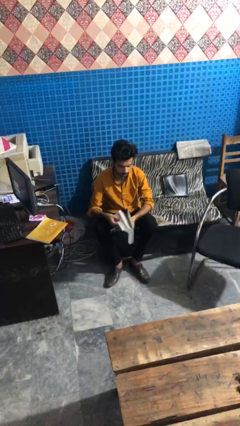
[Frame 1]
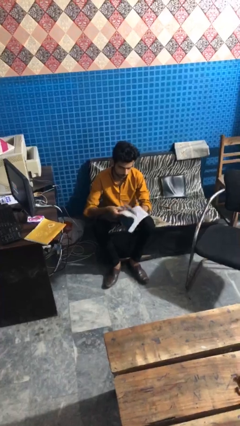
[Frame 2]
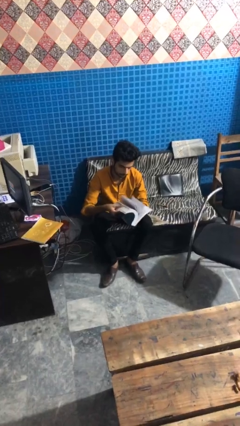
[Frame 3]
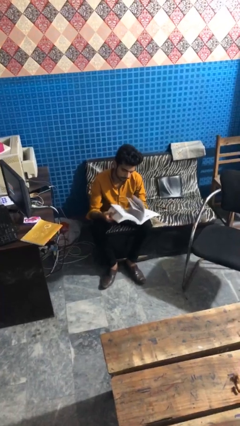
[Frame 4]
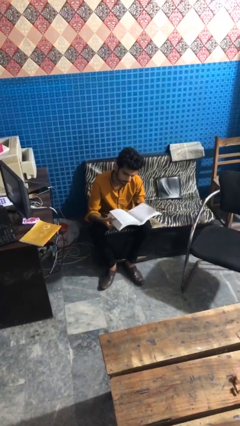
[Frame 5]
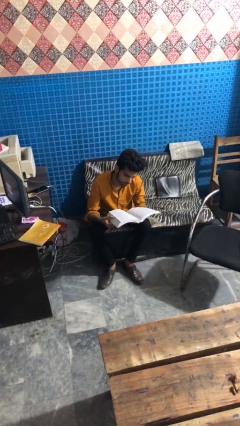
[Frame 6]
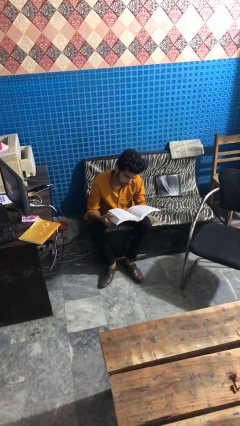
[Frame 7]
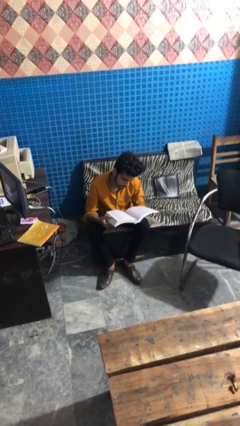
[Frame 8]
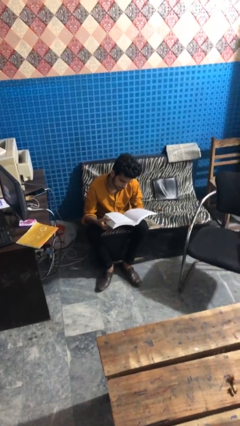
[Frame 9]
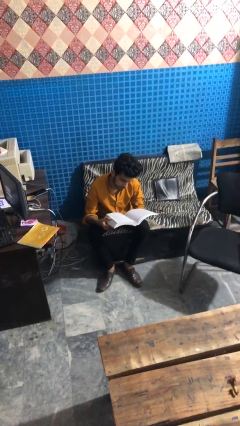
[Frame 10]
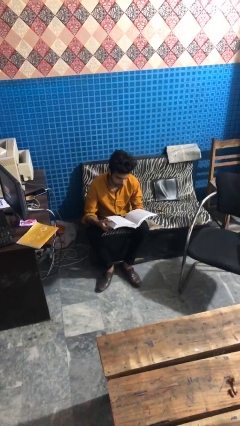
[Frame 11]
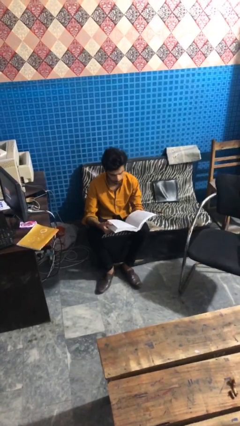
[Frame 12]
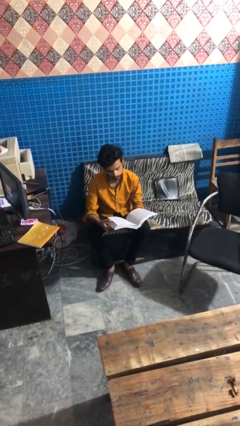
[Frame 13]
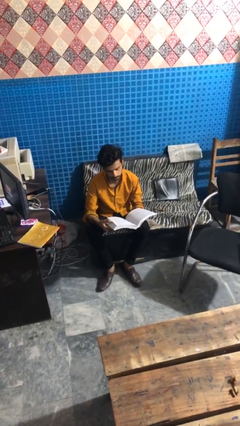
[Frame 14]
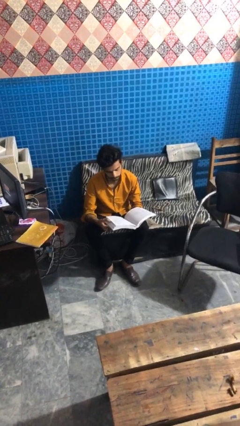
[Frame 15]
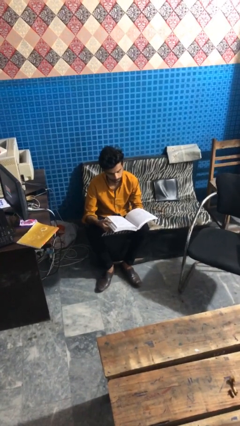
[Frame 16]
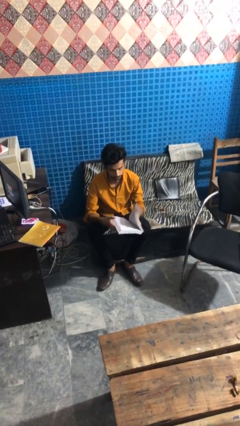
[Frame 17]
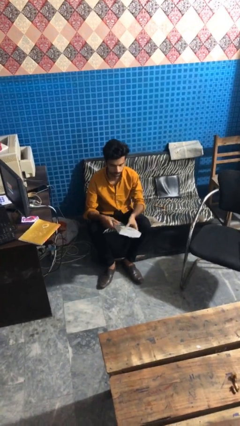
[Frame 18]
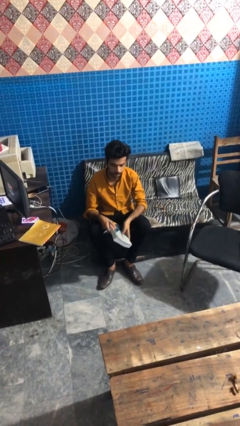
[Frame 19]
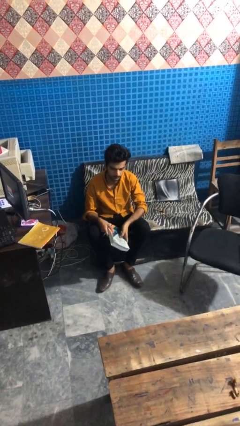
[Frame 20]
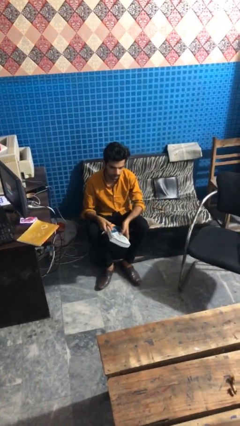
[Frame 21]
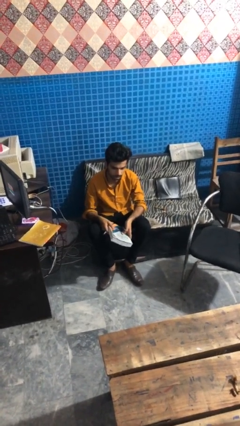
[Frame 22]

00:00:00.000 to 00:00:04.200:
person reads book

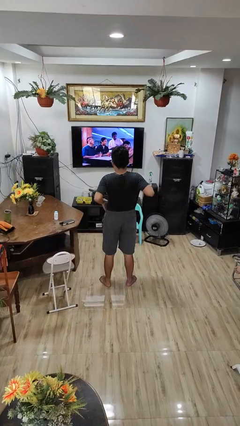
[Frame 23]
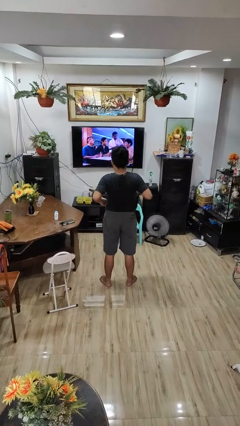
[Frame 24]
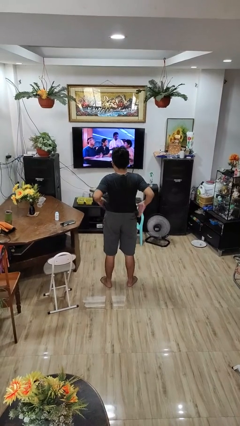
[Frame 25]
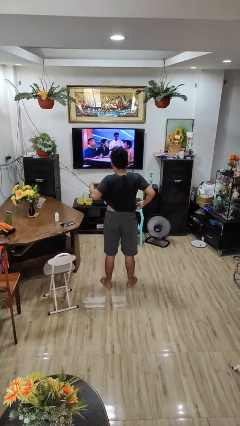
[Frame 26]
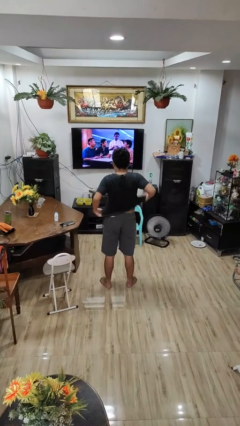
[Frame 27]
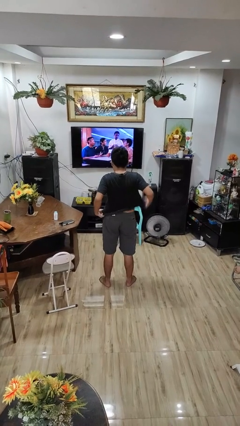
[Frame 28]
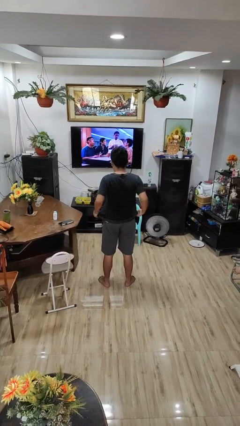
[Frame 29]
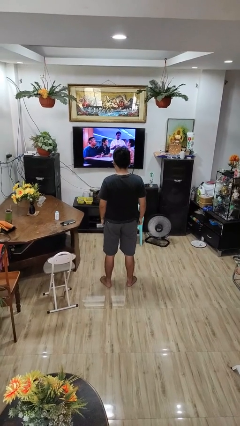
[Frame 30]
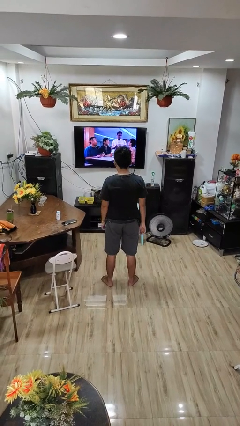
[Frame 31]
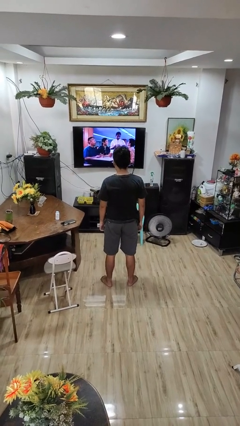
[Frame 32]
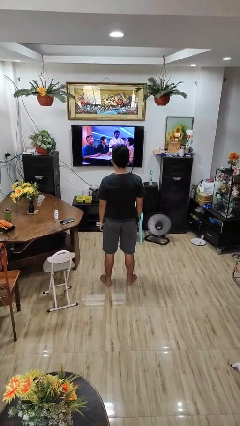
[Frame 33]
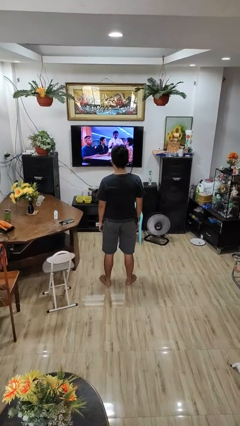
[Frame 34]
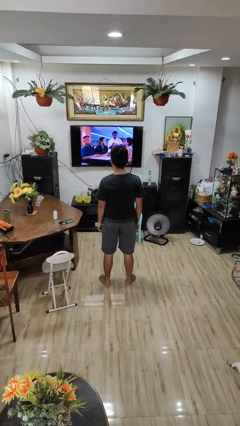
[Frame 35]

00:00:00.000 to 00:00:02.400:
person untucks shirt

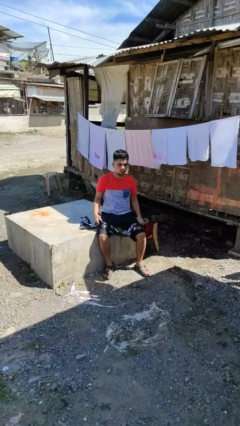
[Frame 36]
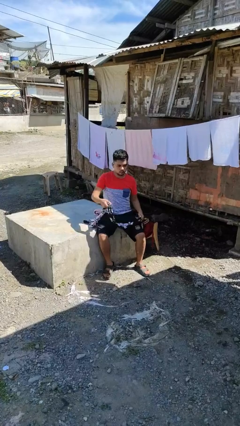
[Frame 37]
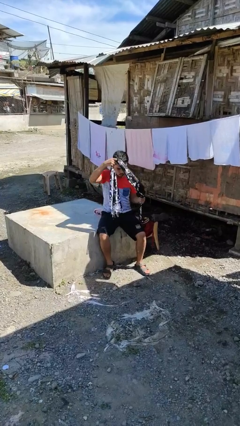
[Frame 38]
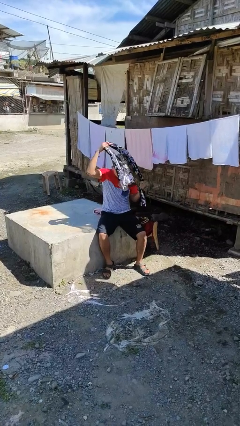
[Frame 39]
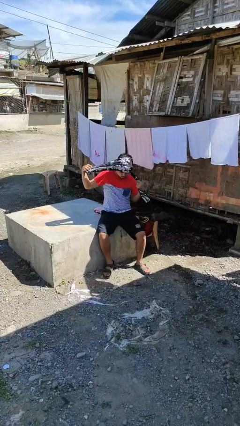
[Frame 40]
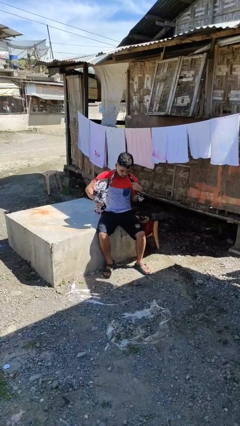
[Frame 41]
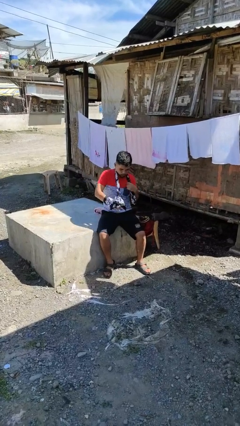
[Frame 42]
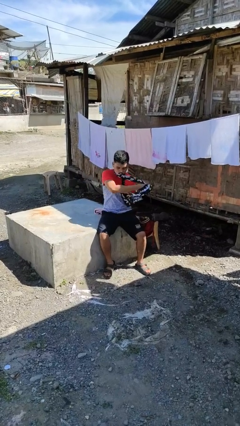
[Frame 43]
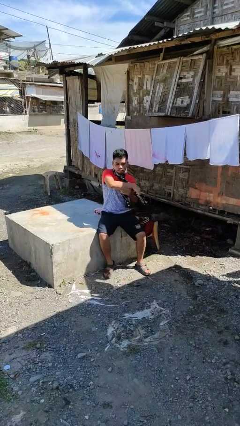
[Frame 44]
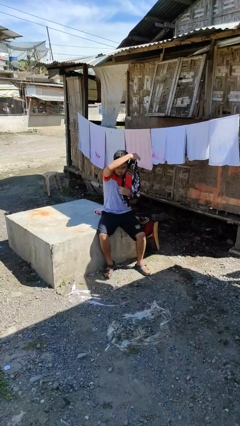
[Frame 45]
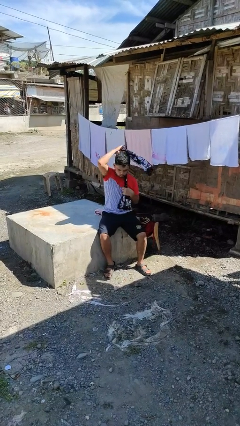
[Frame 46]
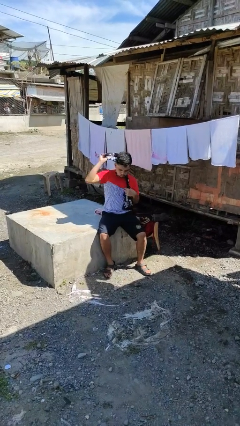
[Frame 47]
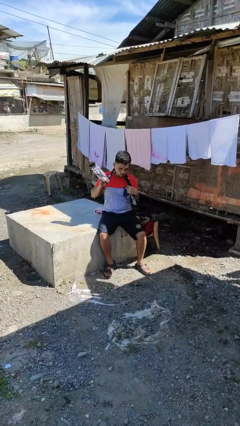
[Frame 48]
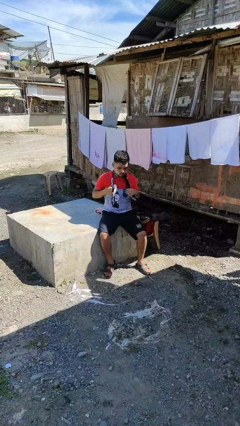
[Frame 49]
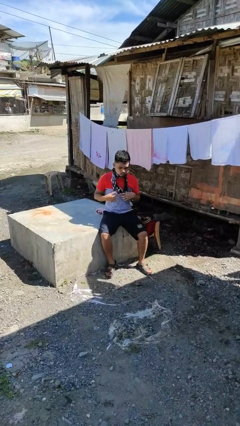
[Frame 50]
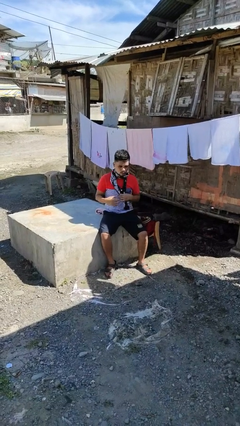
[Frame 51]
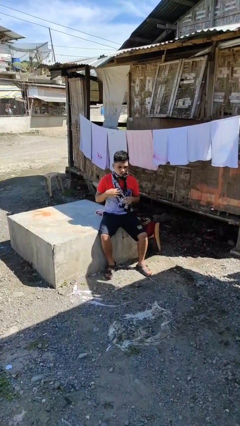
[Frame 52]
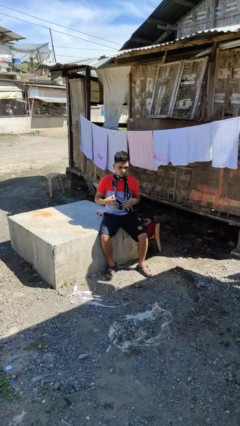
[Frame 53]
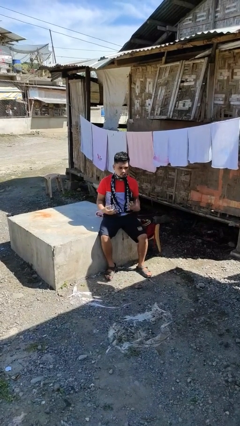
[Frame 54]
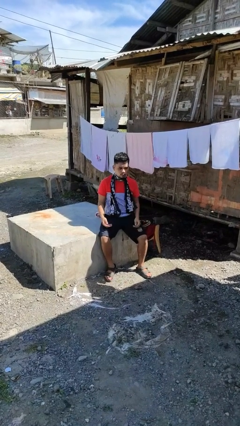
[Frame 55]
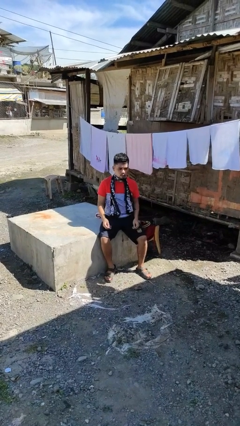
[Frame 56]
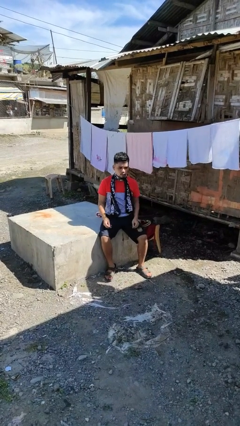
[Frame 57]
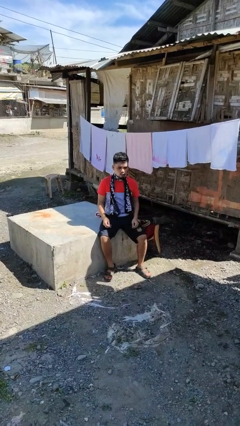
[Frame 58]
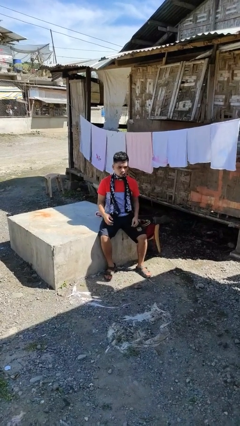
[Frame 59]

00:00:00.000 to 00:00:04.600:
person puts on scarf

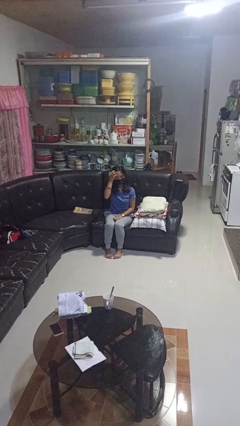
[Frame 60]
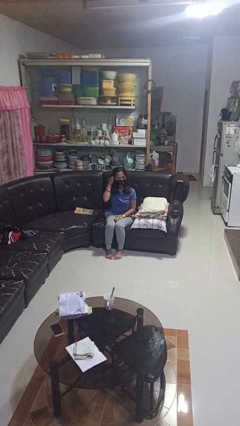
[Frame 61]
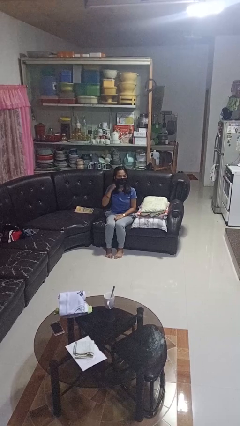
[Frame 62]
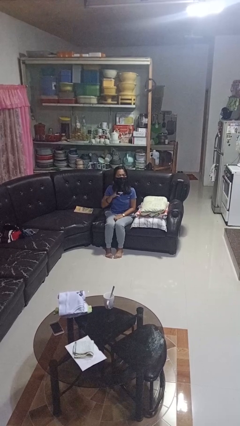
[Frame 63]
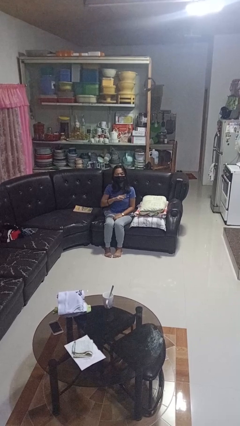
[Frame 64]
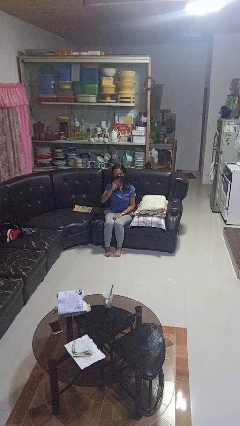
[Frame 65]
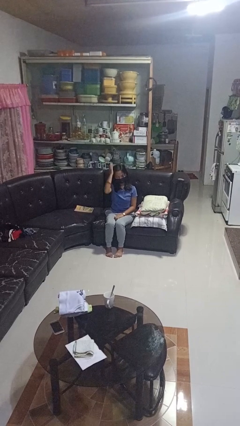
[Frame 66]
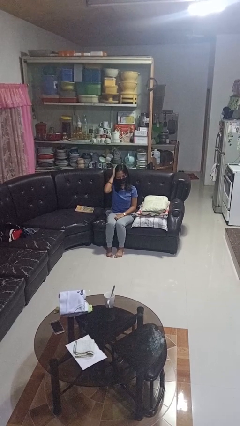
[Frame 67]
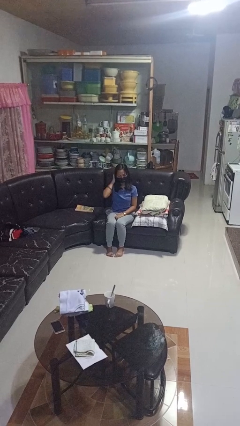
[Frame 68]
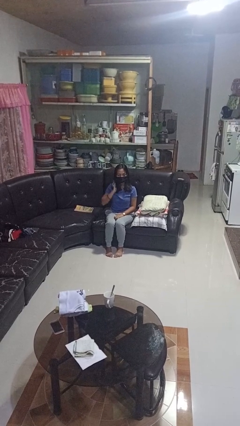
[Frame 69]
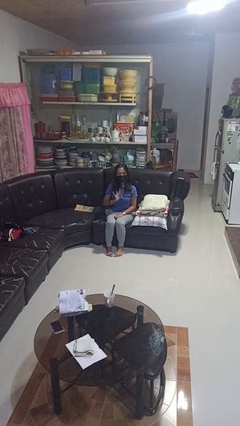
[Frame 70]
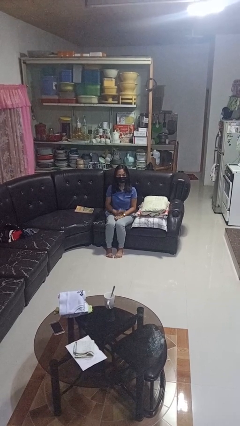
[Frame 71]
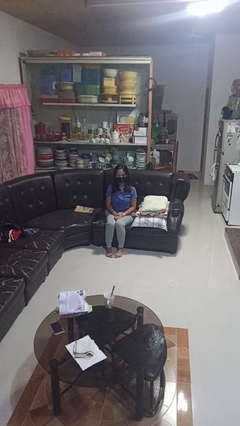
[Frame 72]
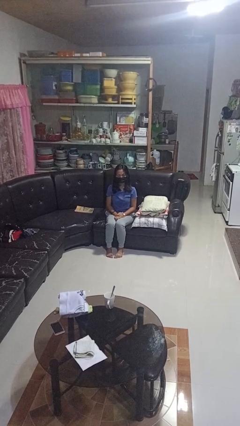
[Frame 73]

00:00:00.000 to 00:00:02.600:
person strokes hair

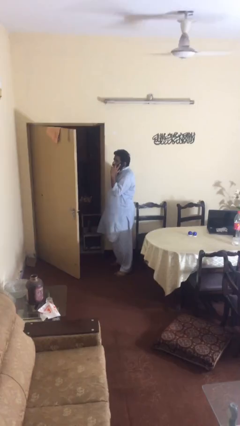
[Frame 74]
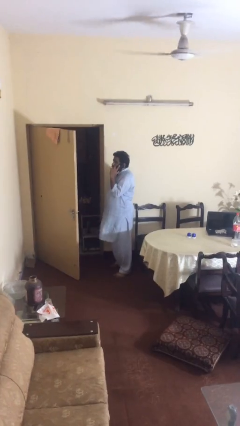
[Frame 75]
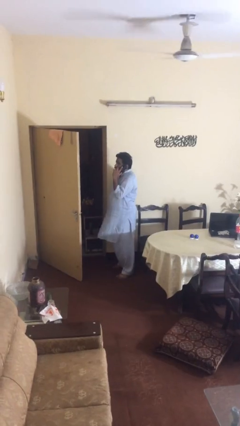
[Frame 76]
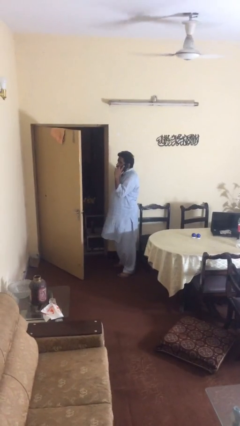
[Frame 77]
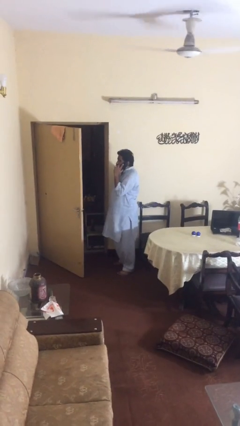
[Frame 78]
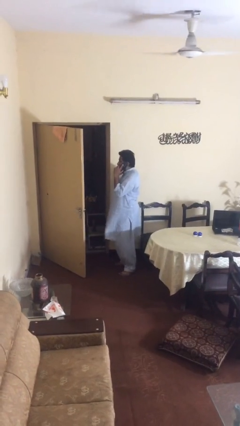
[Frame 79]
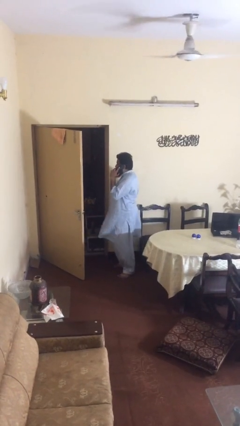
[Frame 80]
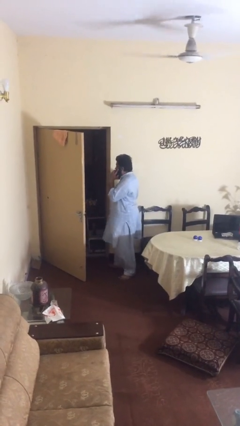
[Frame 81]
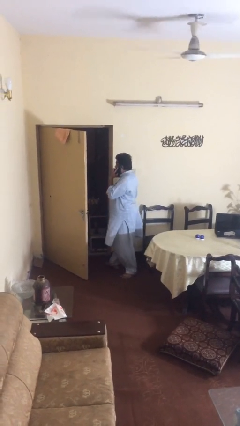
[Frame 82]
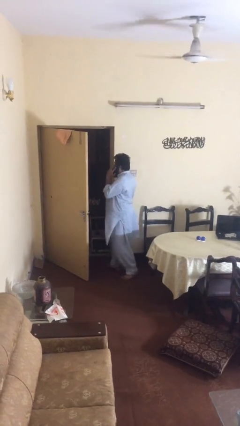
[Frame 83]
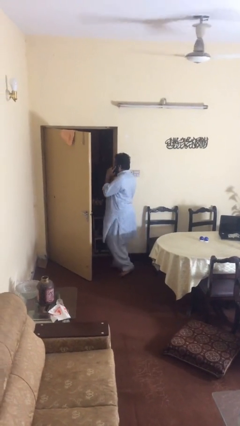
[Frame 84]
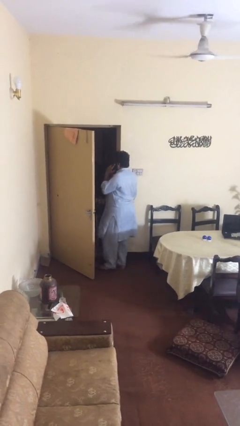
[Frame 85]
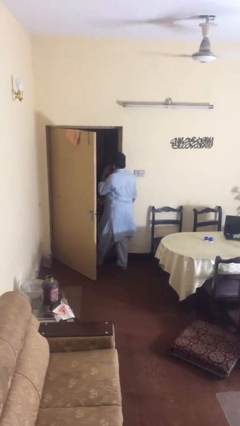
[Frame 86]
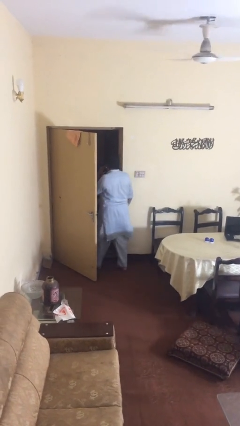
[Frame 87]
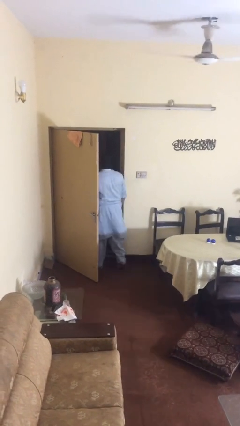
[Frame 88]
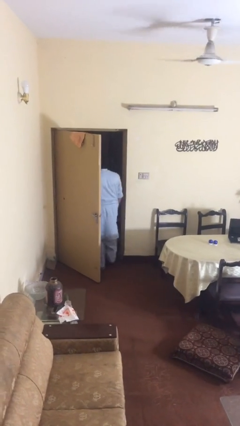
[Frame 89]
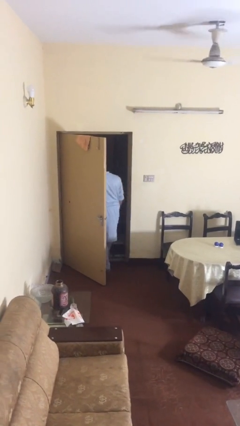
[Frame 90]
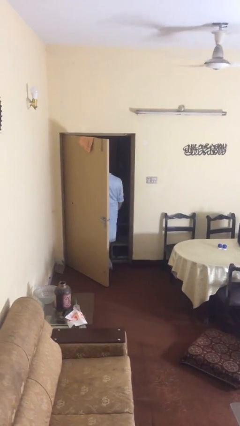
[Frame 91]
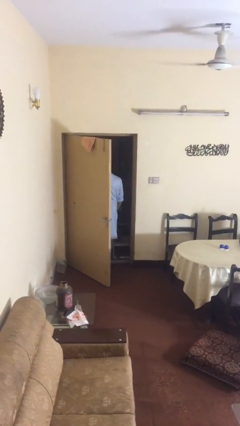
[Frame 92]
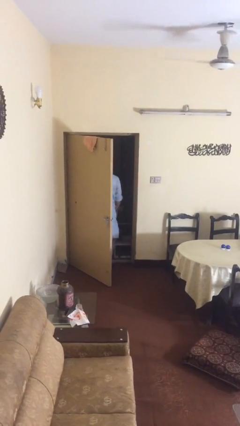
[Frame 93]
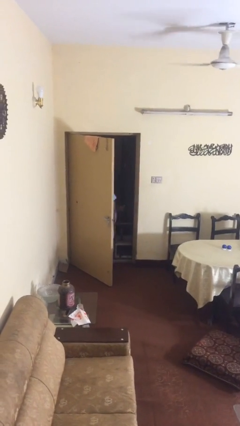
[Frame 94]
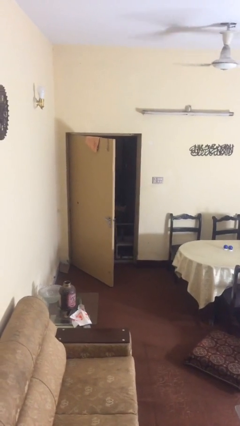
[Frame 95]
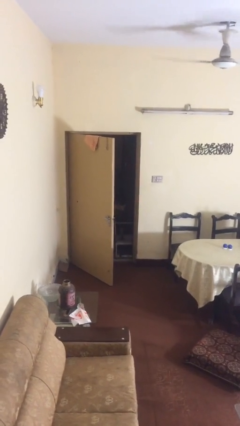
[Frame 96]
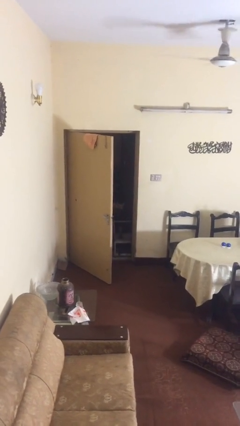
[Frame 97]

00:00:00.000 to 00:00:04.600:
person exits scene through structure
